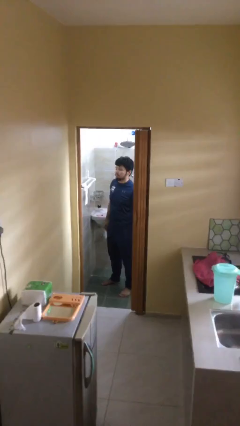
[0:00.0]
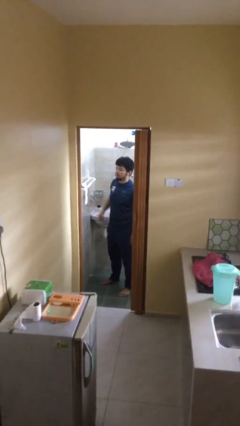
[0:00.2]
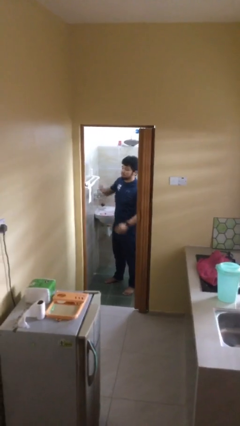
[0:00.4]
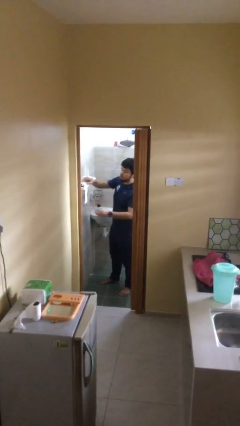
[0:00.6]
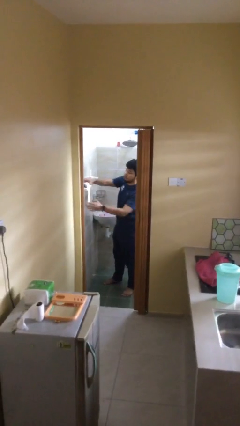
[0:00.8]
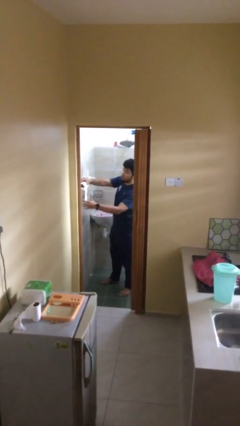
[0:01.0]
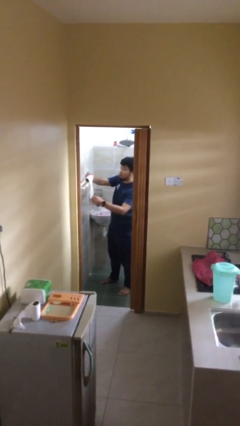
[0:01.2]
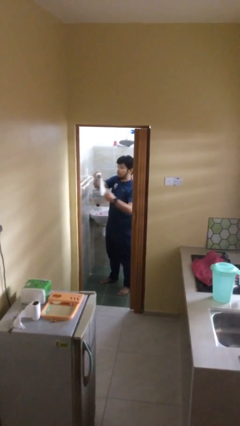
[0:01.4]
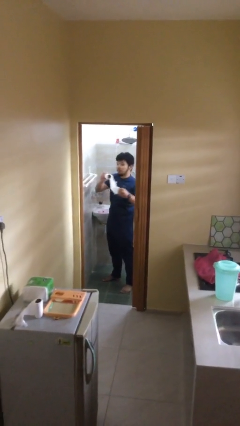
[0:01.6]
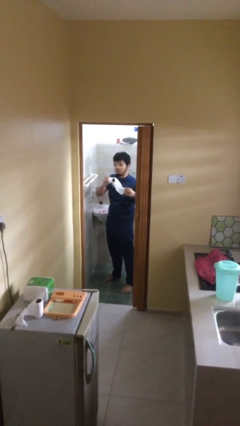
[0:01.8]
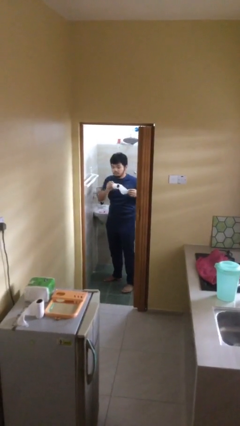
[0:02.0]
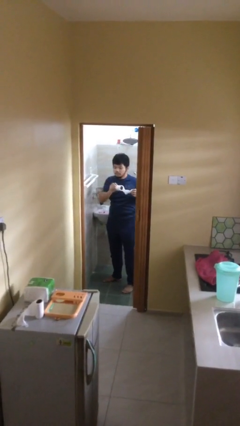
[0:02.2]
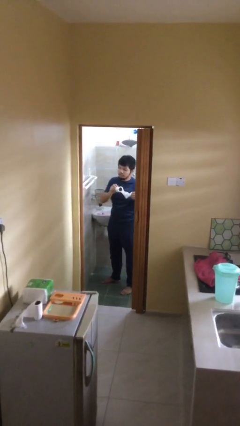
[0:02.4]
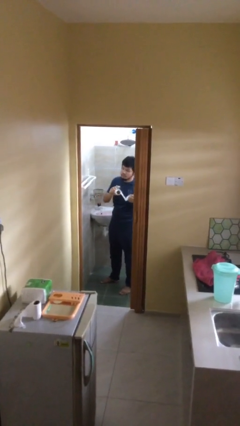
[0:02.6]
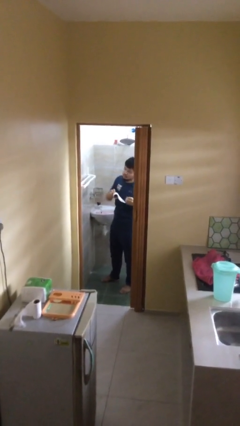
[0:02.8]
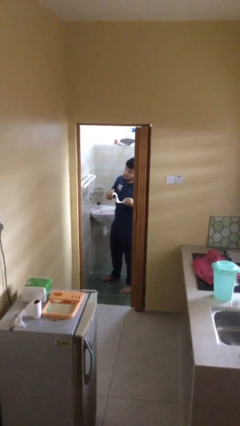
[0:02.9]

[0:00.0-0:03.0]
person picks up object from countertop

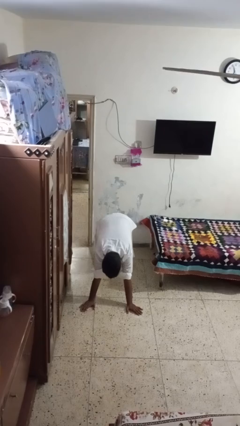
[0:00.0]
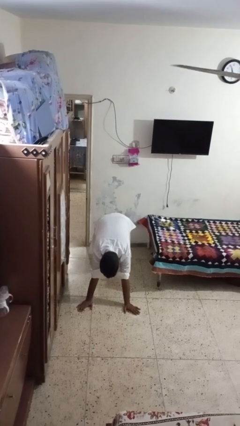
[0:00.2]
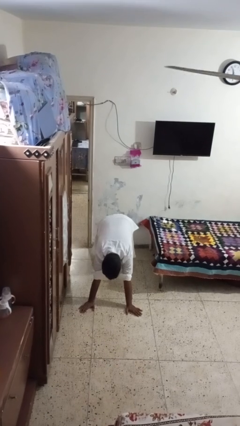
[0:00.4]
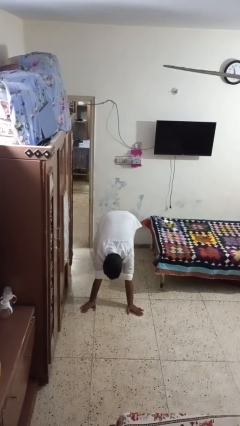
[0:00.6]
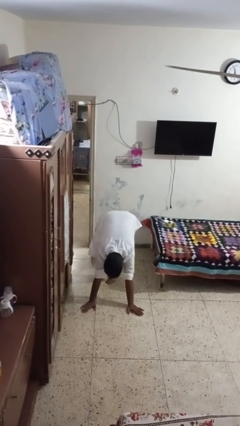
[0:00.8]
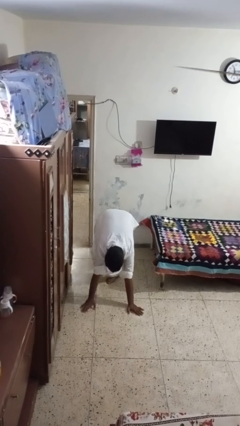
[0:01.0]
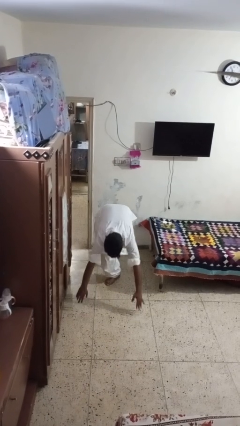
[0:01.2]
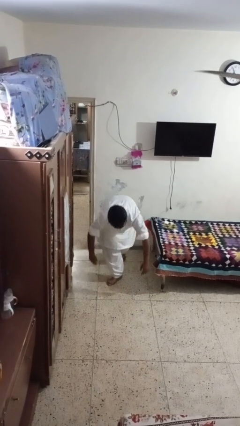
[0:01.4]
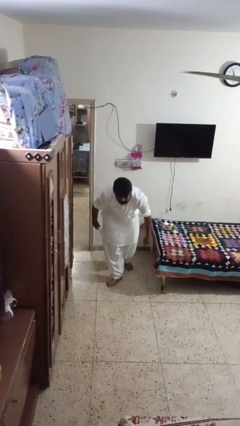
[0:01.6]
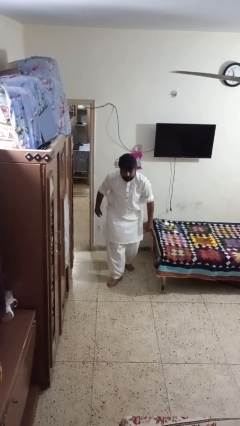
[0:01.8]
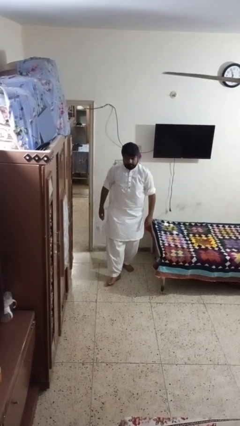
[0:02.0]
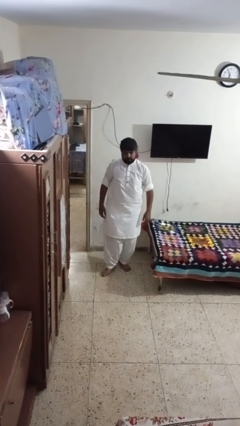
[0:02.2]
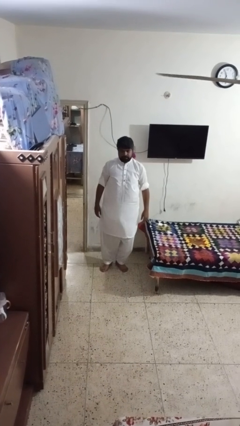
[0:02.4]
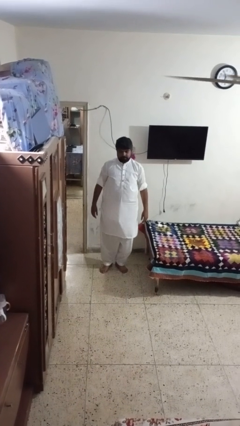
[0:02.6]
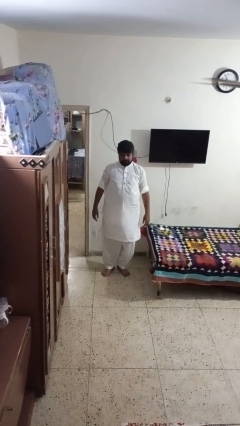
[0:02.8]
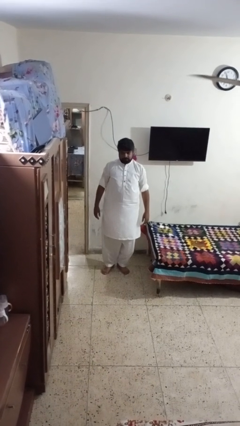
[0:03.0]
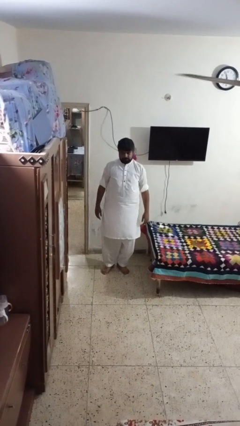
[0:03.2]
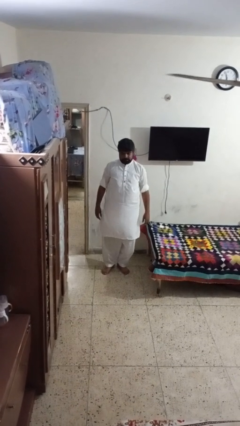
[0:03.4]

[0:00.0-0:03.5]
person stands up from floor

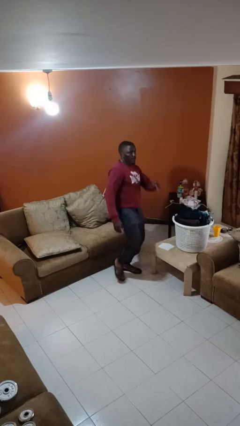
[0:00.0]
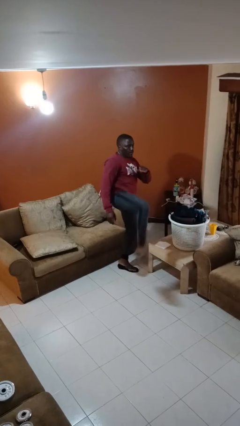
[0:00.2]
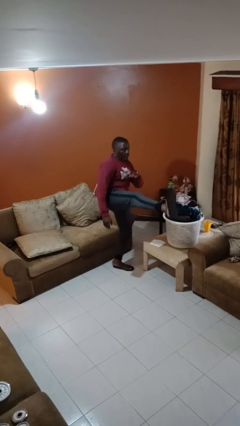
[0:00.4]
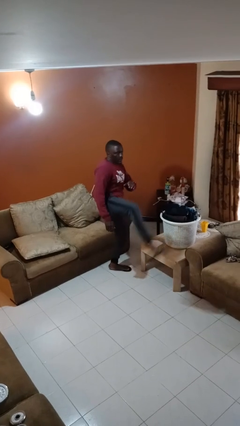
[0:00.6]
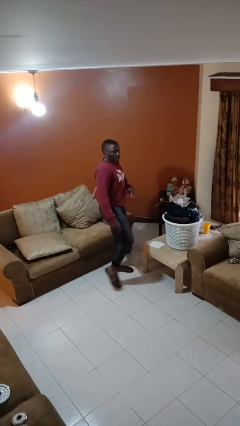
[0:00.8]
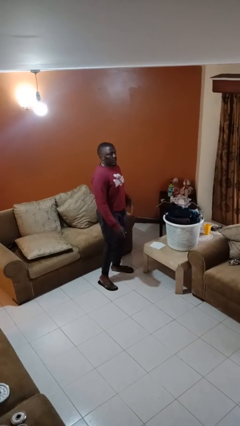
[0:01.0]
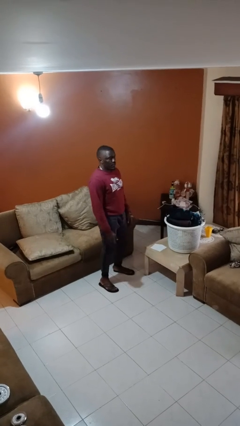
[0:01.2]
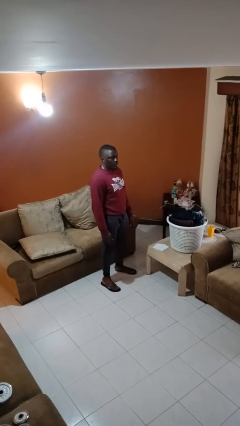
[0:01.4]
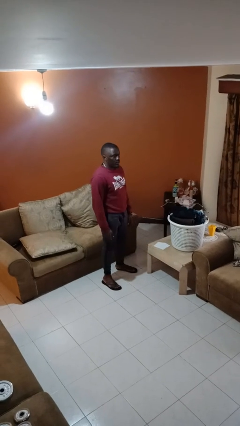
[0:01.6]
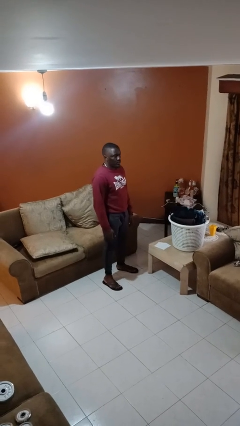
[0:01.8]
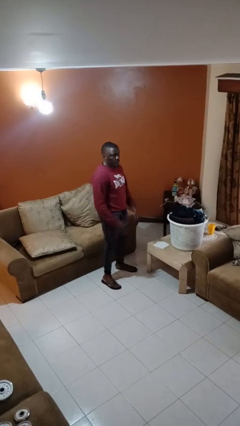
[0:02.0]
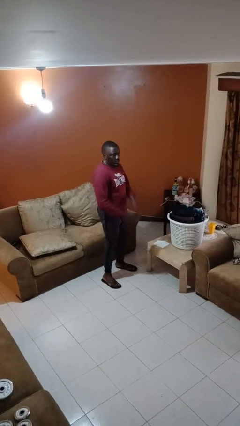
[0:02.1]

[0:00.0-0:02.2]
person karate kicks

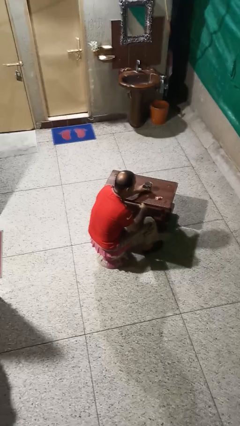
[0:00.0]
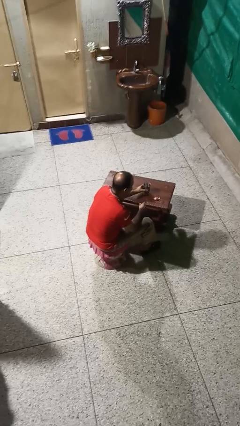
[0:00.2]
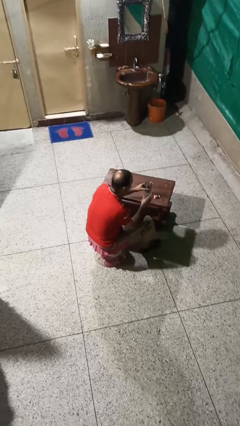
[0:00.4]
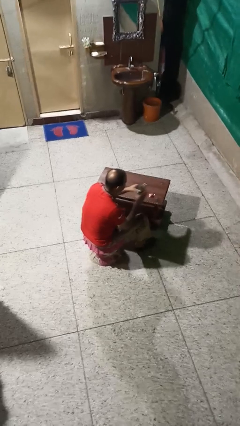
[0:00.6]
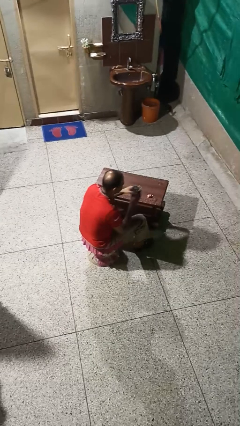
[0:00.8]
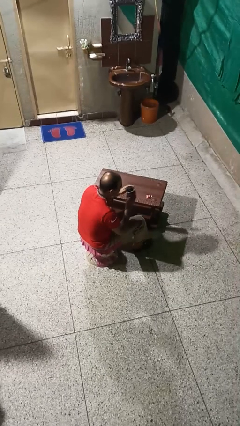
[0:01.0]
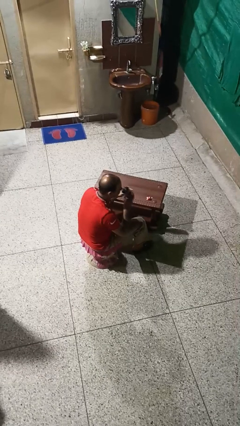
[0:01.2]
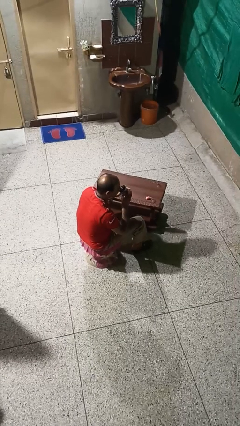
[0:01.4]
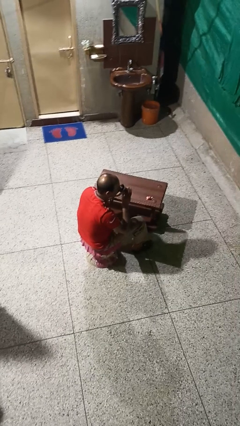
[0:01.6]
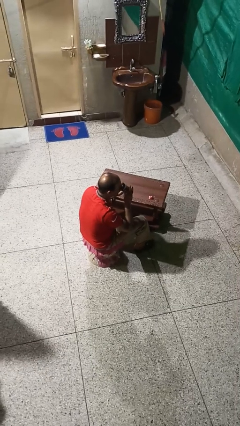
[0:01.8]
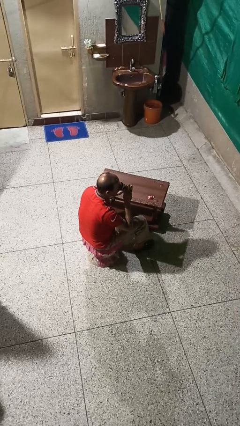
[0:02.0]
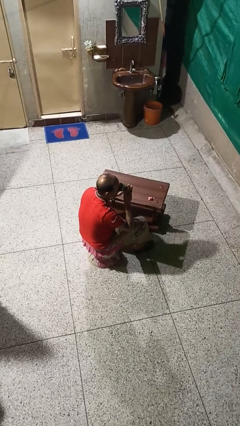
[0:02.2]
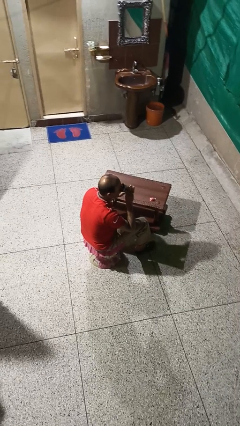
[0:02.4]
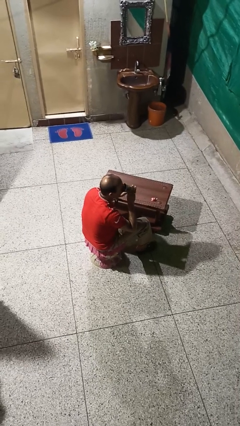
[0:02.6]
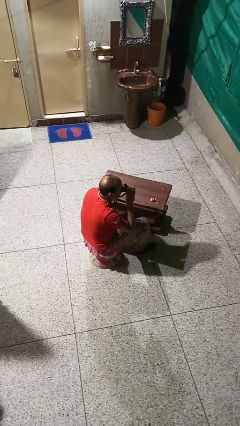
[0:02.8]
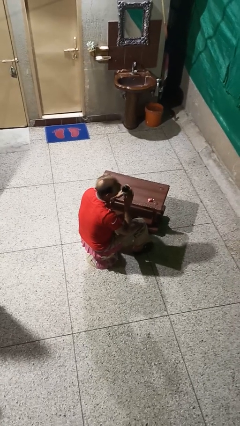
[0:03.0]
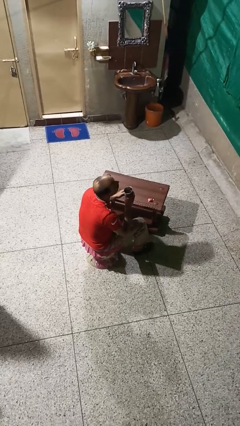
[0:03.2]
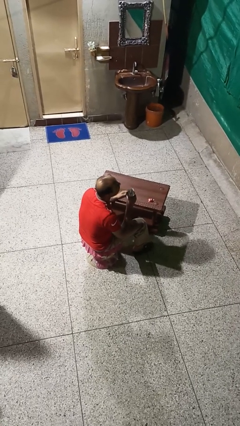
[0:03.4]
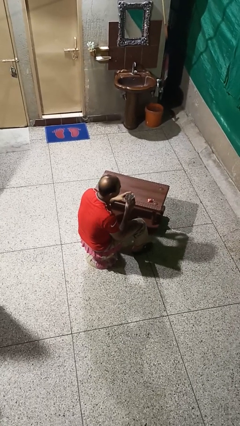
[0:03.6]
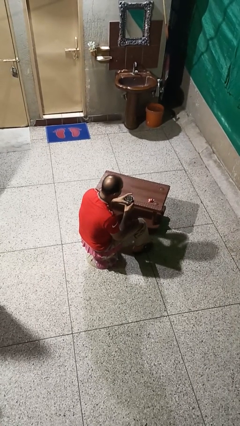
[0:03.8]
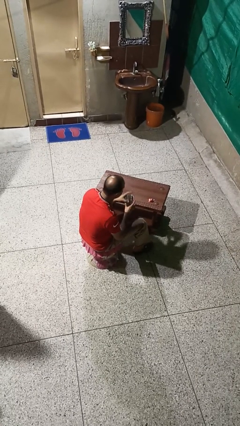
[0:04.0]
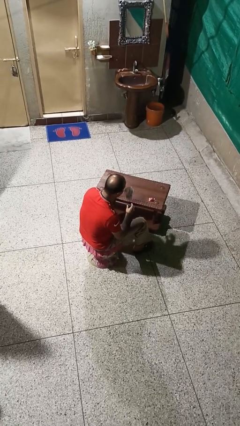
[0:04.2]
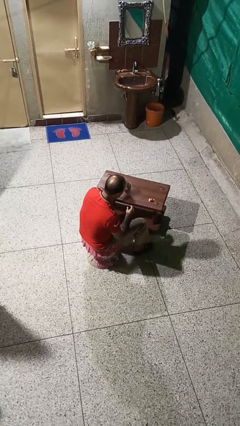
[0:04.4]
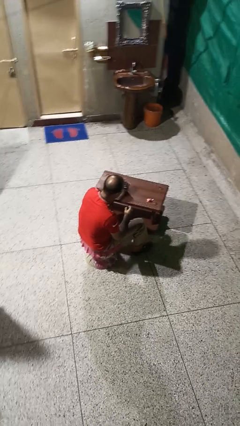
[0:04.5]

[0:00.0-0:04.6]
person drinks from cup

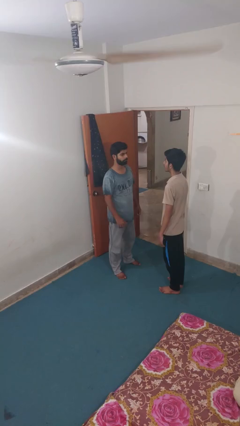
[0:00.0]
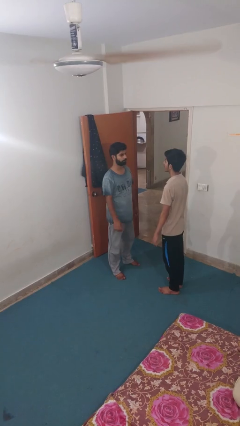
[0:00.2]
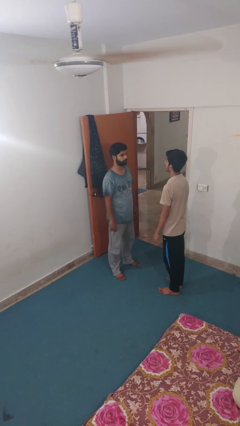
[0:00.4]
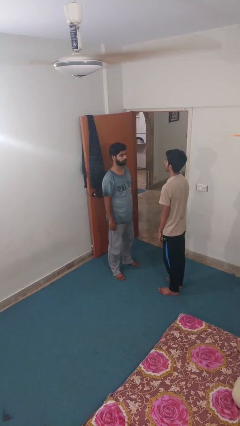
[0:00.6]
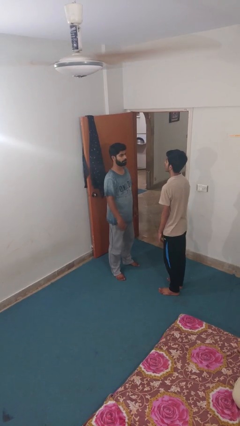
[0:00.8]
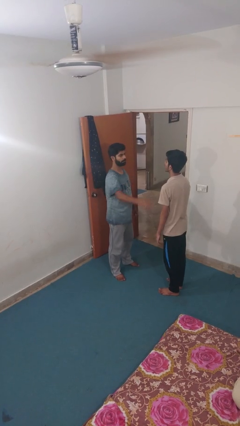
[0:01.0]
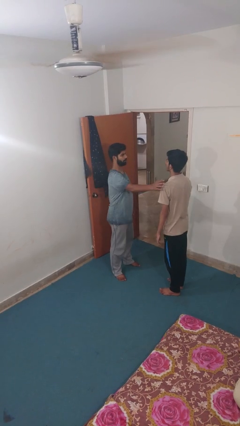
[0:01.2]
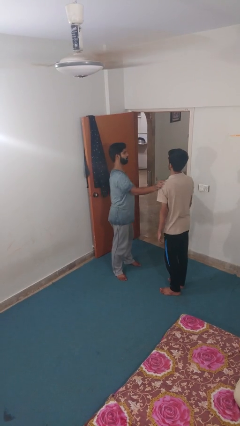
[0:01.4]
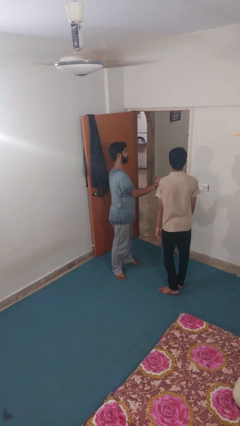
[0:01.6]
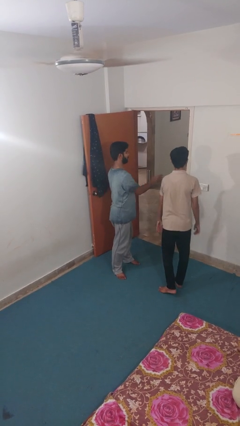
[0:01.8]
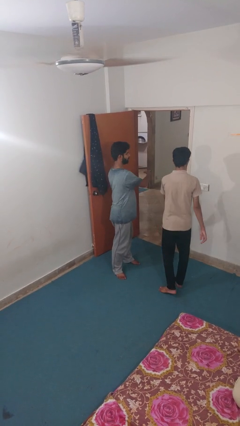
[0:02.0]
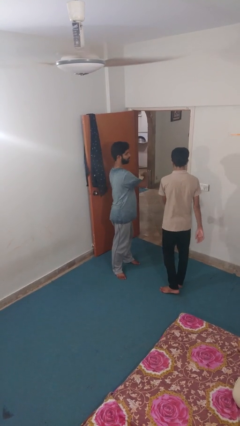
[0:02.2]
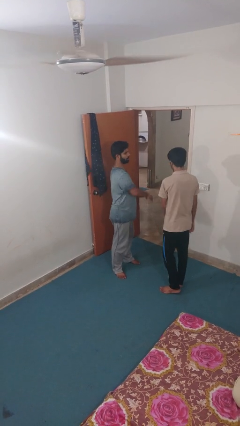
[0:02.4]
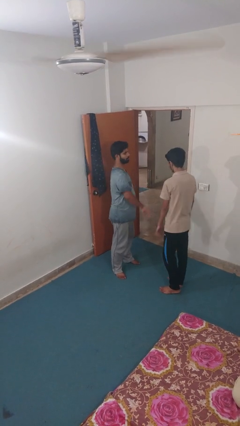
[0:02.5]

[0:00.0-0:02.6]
person shoves person

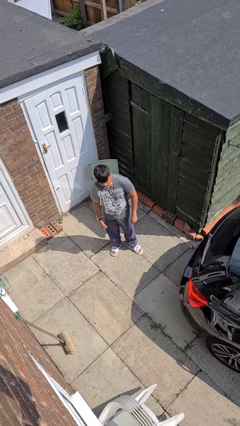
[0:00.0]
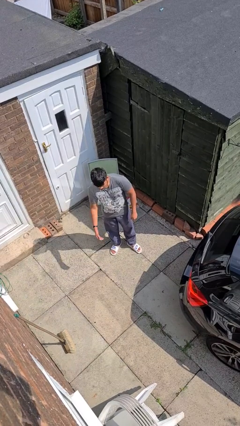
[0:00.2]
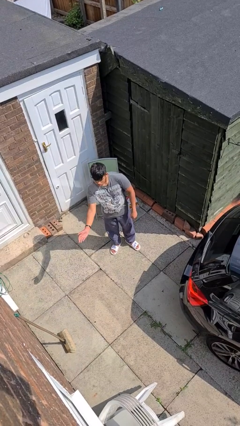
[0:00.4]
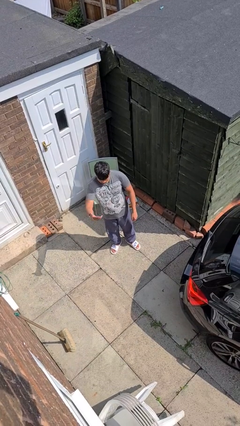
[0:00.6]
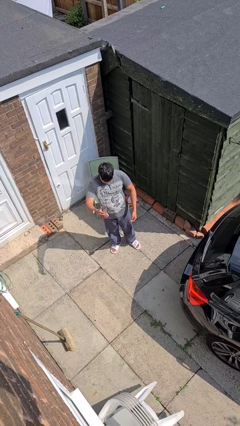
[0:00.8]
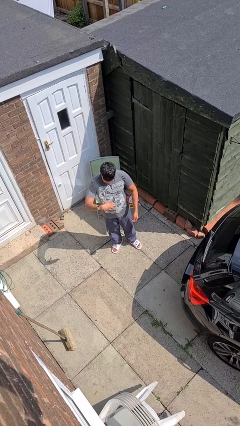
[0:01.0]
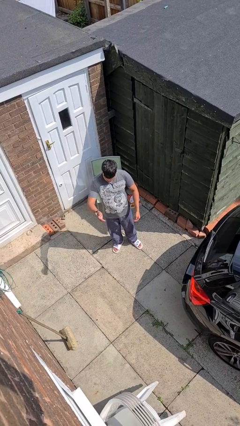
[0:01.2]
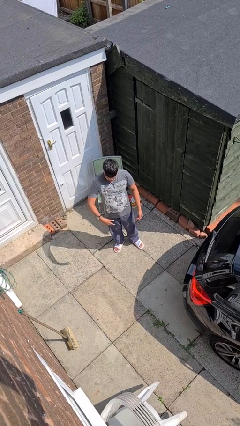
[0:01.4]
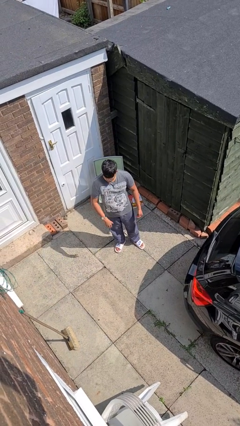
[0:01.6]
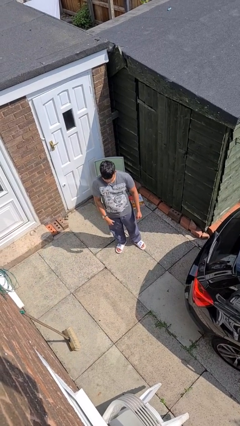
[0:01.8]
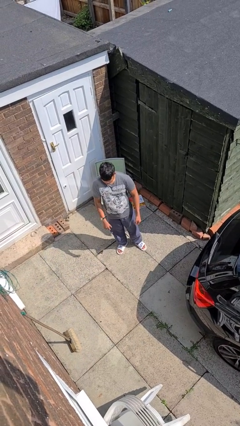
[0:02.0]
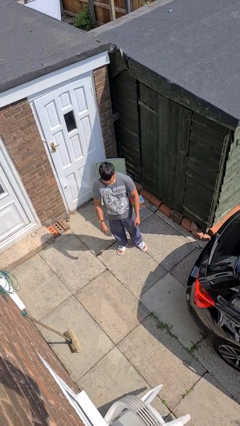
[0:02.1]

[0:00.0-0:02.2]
person gestures come here
